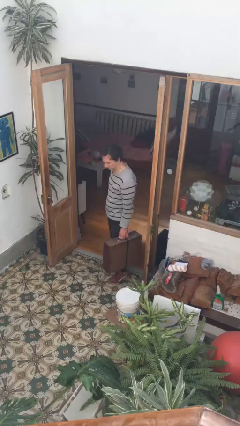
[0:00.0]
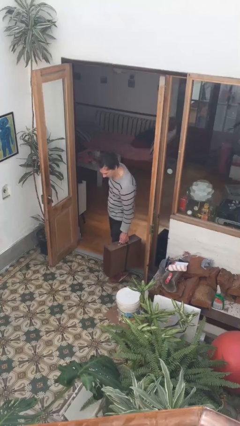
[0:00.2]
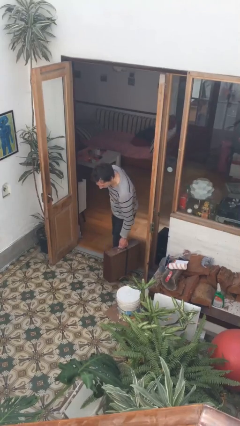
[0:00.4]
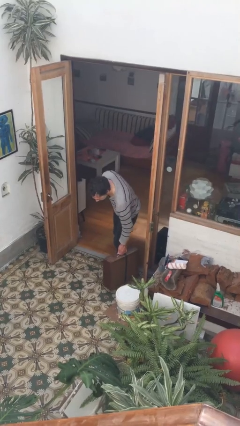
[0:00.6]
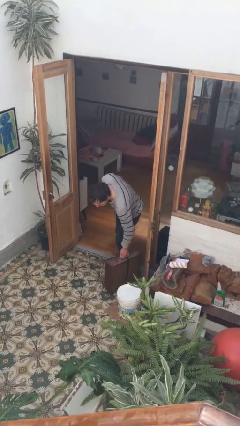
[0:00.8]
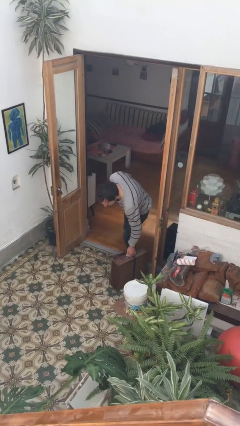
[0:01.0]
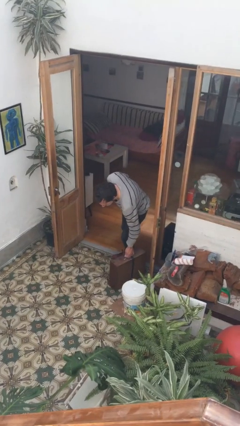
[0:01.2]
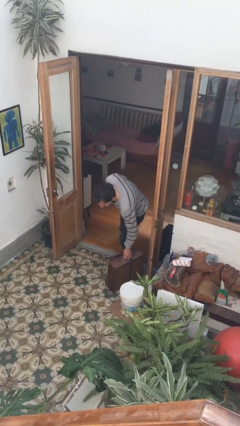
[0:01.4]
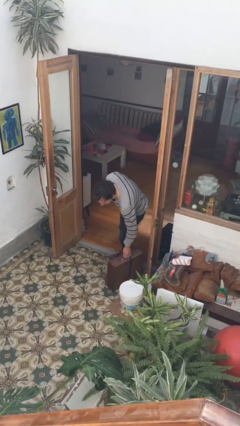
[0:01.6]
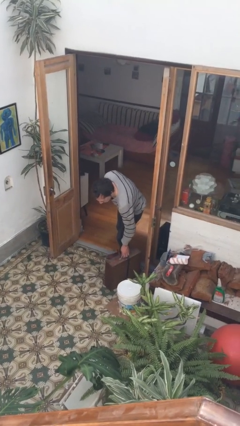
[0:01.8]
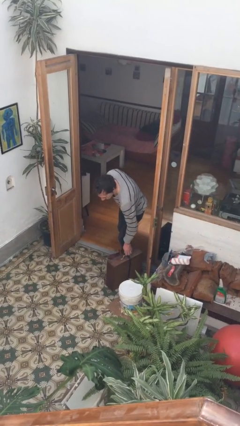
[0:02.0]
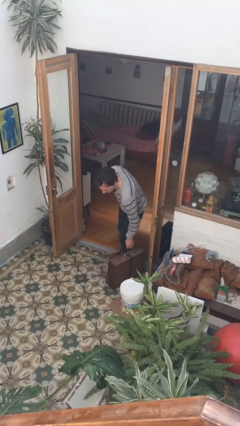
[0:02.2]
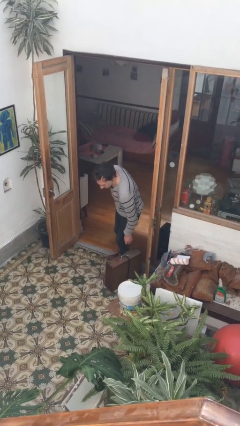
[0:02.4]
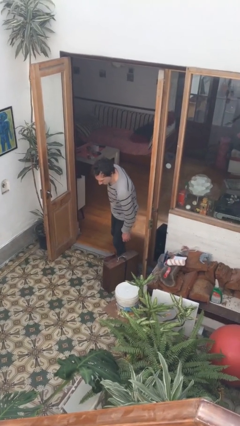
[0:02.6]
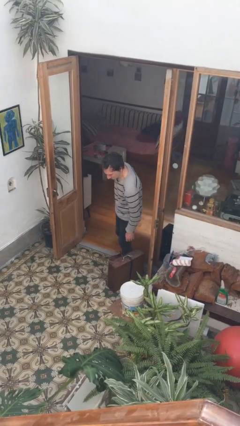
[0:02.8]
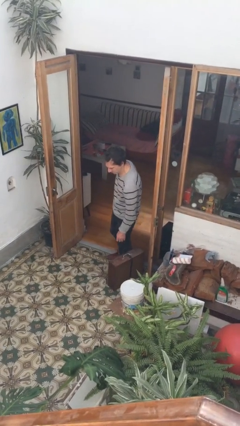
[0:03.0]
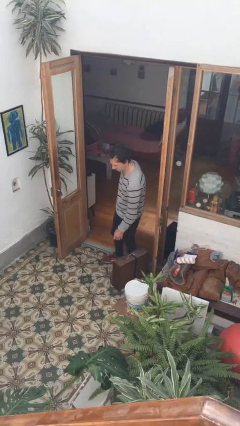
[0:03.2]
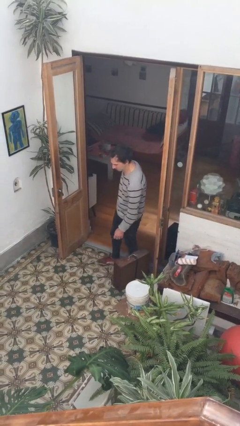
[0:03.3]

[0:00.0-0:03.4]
person puts down object on floor

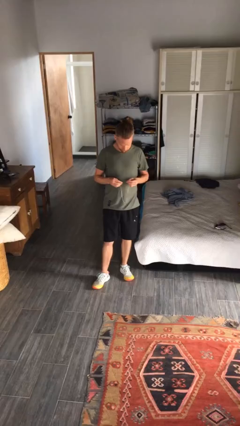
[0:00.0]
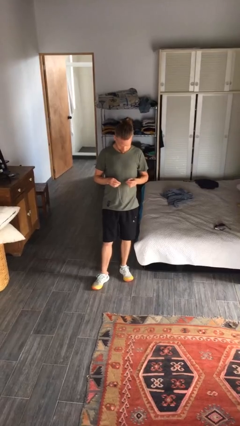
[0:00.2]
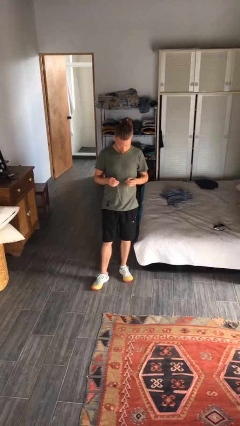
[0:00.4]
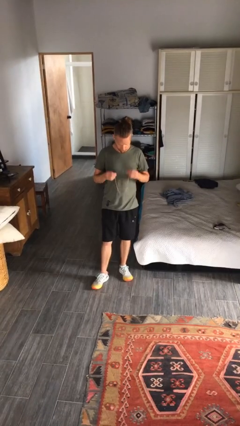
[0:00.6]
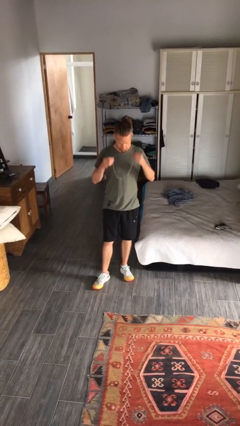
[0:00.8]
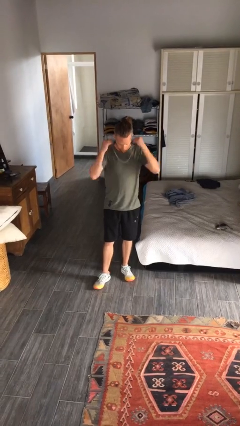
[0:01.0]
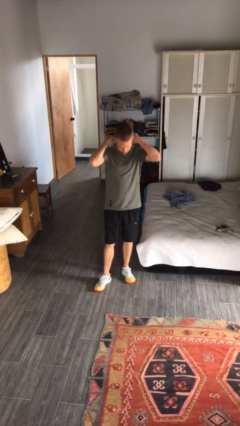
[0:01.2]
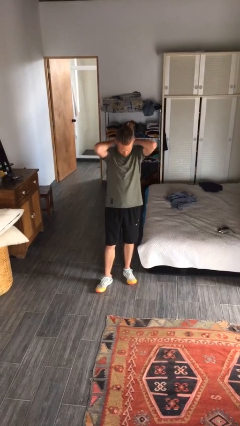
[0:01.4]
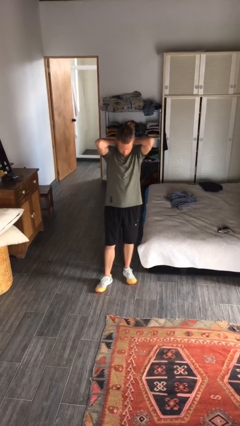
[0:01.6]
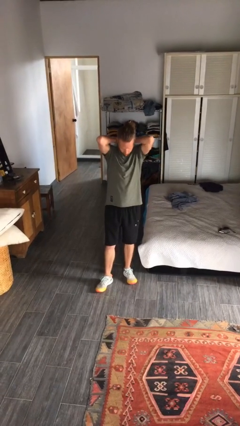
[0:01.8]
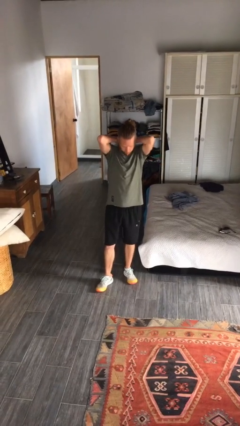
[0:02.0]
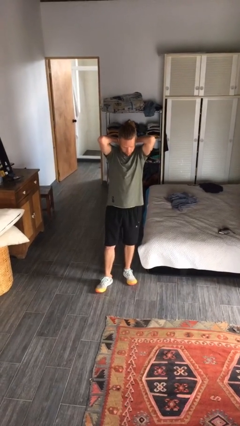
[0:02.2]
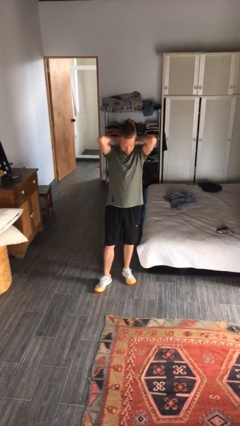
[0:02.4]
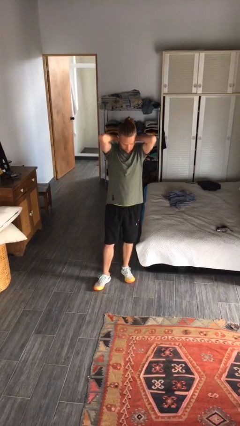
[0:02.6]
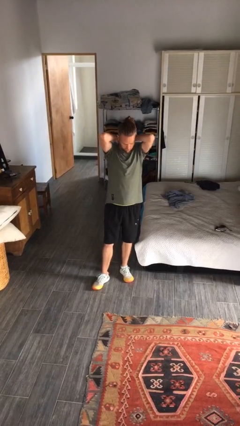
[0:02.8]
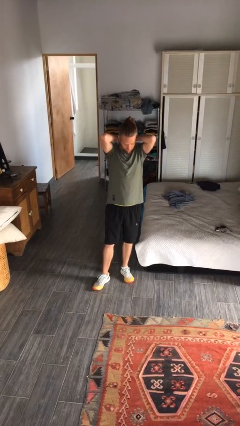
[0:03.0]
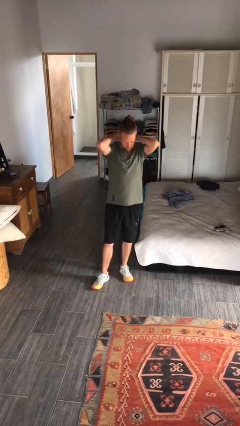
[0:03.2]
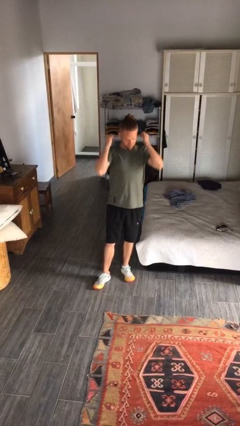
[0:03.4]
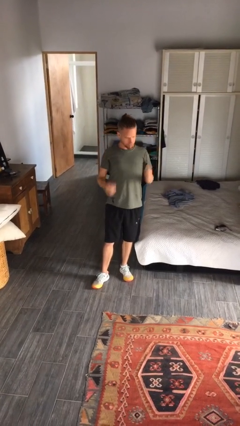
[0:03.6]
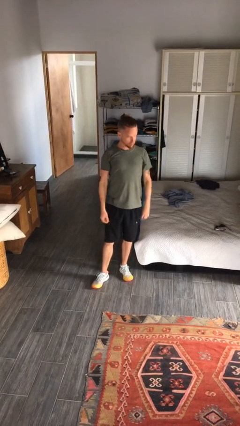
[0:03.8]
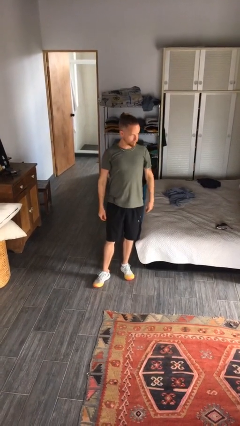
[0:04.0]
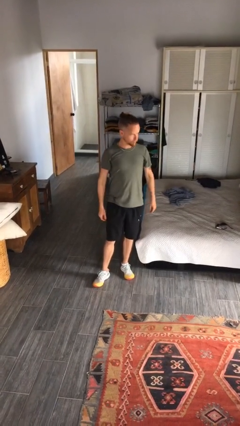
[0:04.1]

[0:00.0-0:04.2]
person puts on necklace

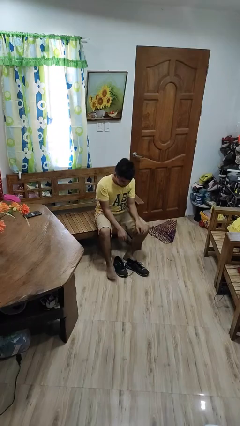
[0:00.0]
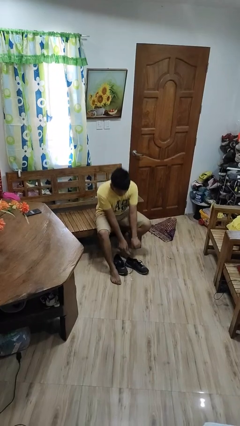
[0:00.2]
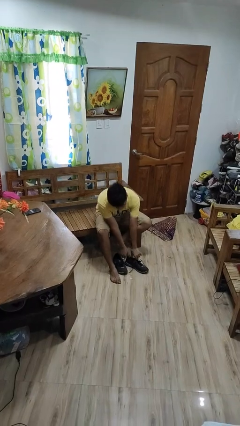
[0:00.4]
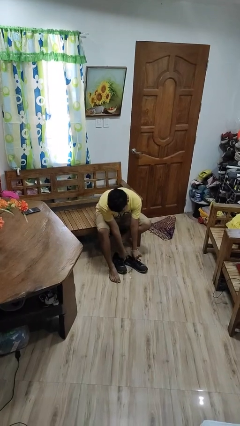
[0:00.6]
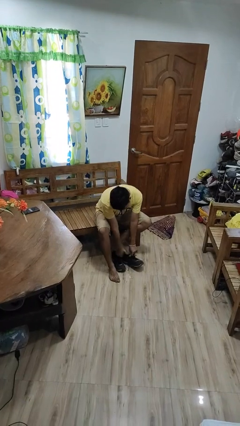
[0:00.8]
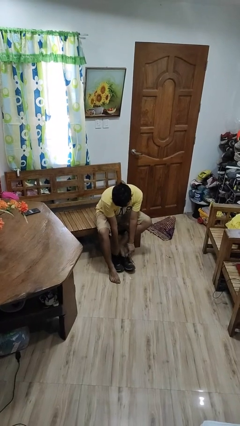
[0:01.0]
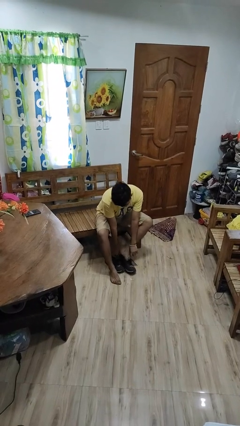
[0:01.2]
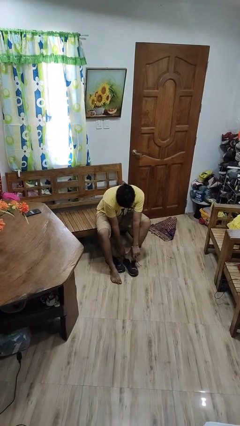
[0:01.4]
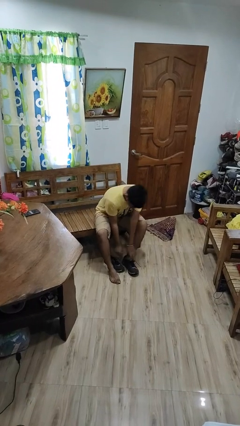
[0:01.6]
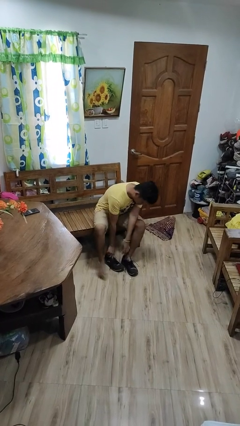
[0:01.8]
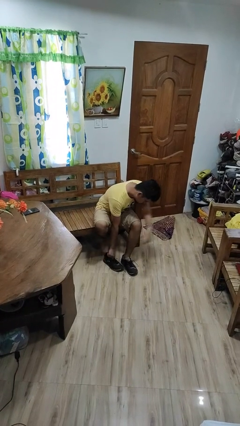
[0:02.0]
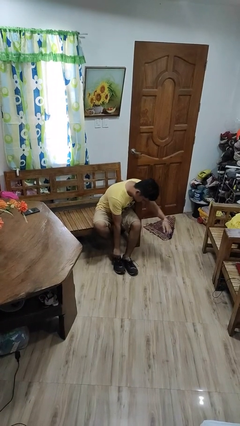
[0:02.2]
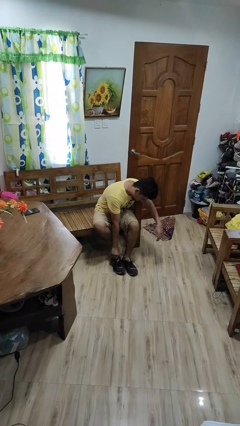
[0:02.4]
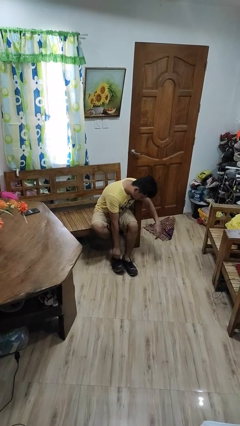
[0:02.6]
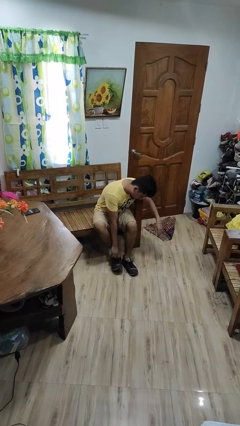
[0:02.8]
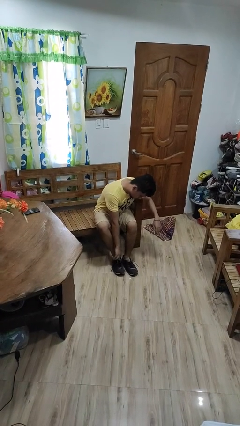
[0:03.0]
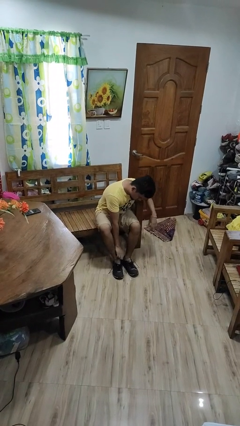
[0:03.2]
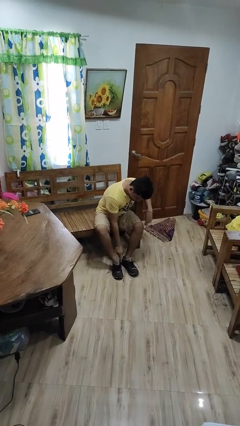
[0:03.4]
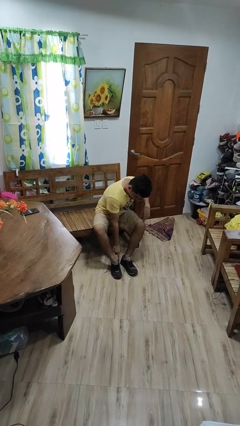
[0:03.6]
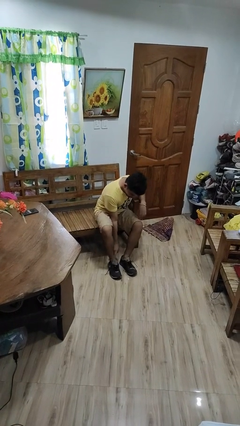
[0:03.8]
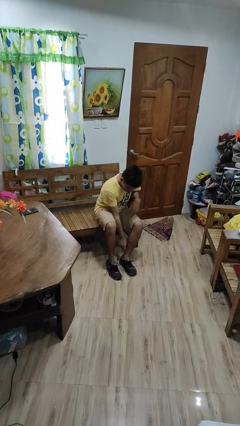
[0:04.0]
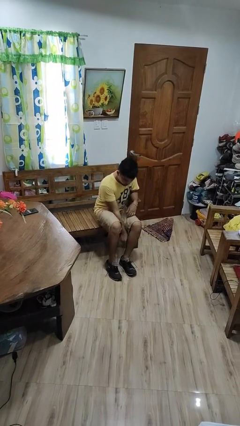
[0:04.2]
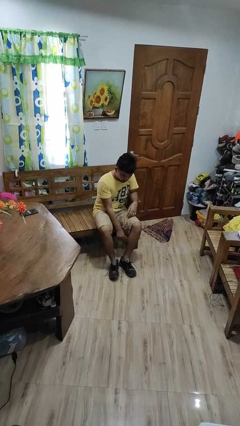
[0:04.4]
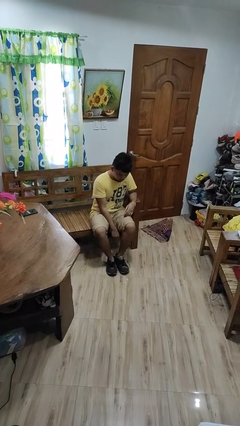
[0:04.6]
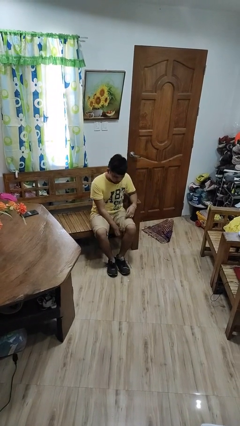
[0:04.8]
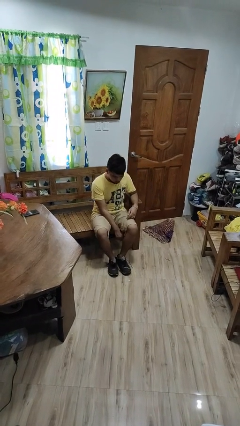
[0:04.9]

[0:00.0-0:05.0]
person puts on shoes

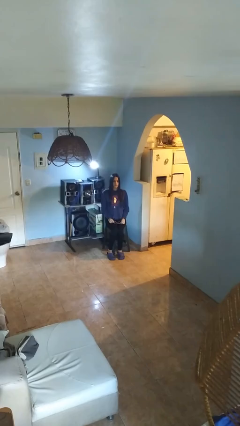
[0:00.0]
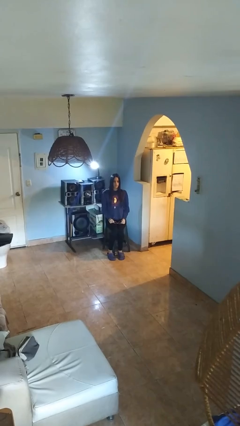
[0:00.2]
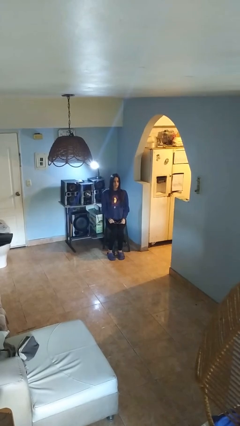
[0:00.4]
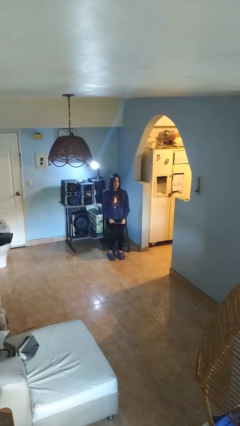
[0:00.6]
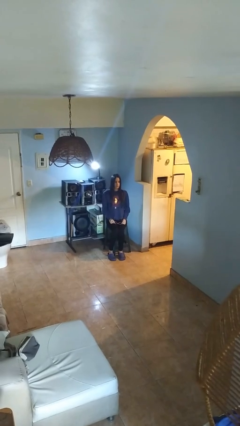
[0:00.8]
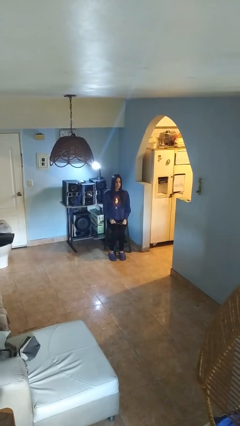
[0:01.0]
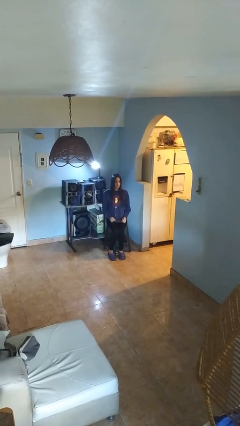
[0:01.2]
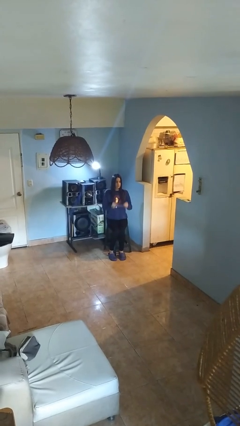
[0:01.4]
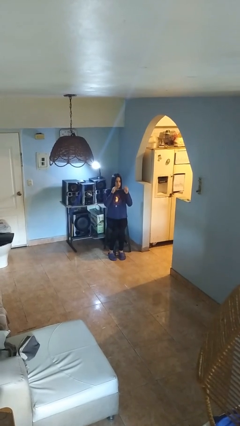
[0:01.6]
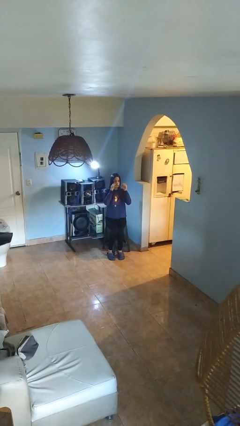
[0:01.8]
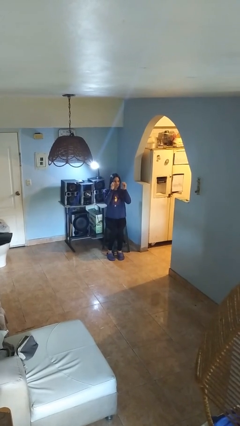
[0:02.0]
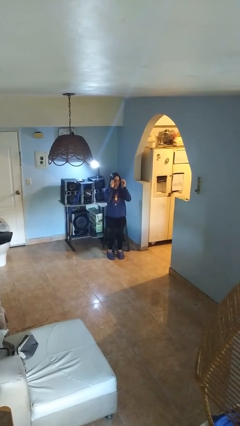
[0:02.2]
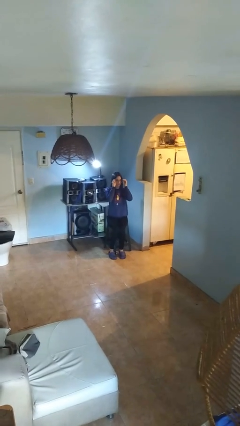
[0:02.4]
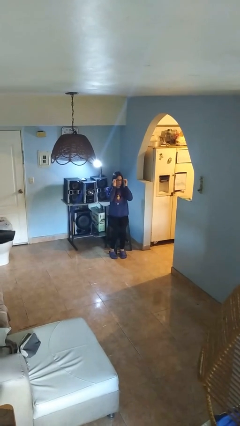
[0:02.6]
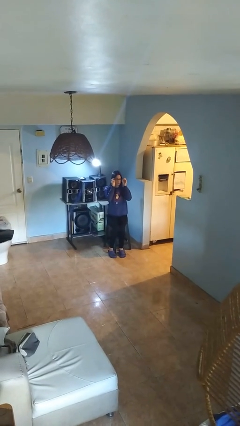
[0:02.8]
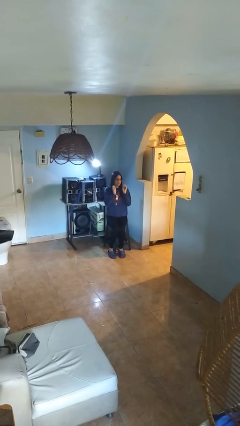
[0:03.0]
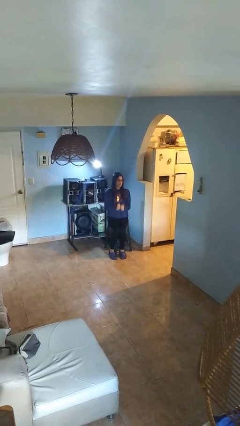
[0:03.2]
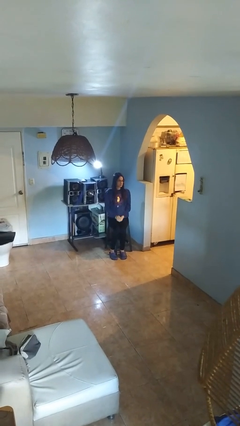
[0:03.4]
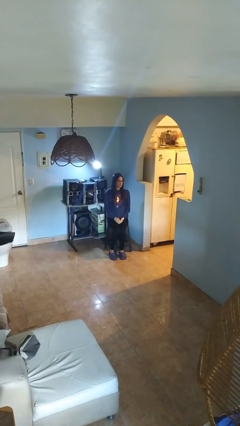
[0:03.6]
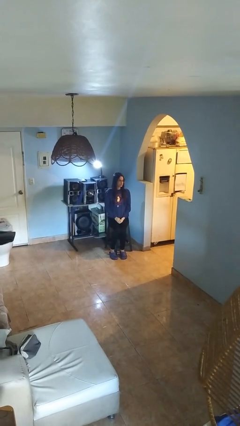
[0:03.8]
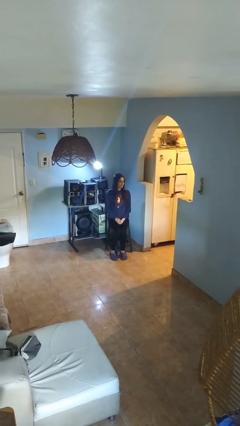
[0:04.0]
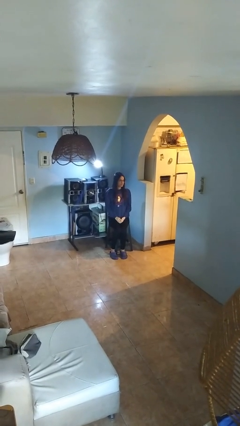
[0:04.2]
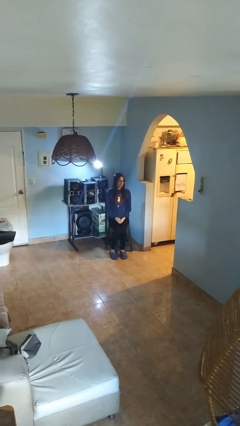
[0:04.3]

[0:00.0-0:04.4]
person puts on glasses

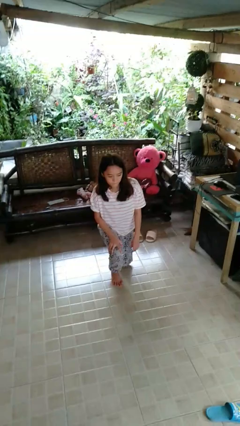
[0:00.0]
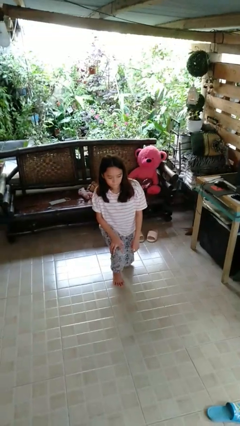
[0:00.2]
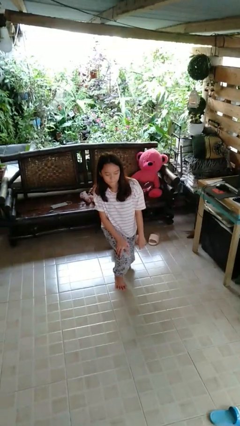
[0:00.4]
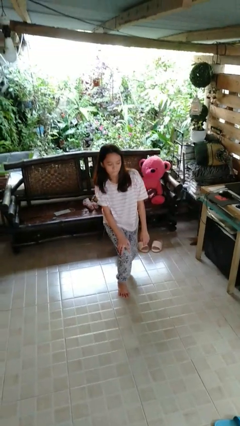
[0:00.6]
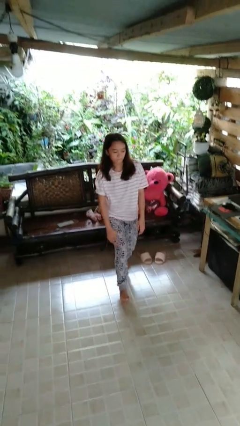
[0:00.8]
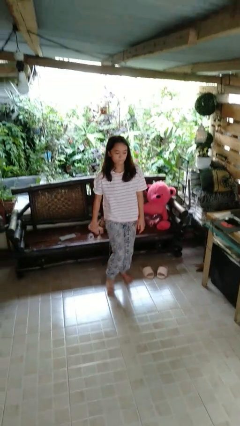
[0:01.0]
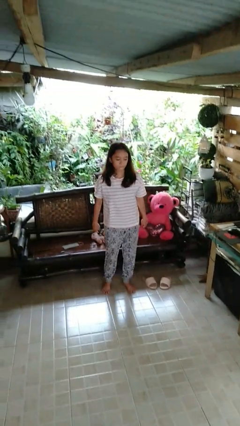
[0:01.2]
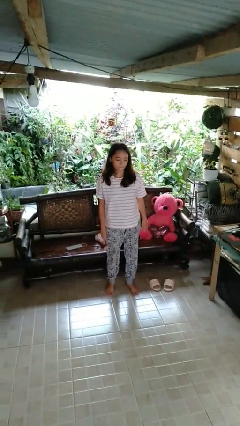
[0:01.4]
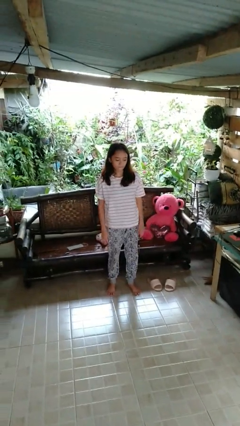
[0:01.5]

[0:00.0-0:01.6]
person stands up from floor
